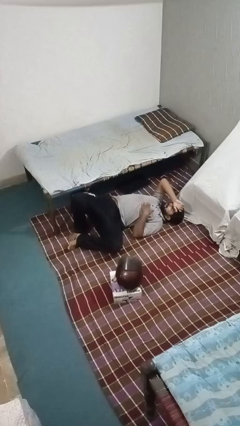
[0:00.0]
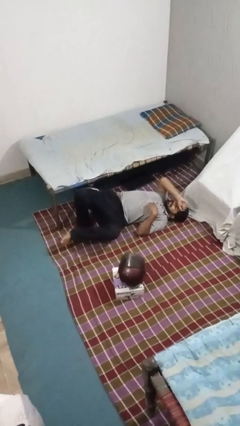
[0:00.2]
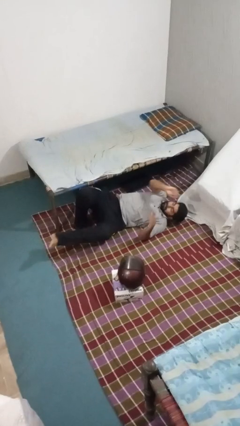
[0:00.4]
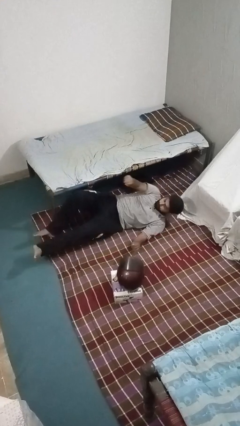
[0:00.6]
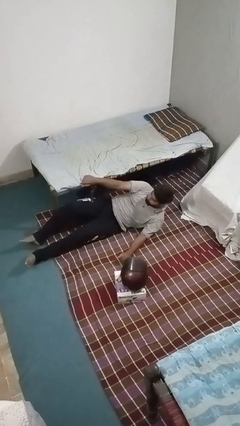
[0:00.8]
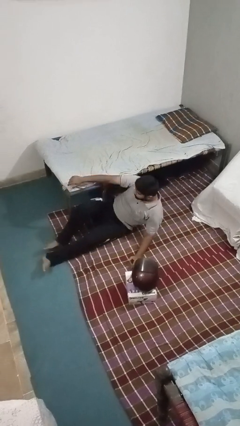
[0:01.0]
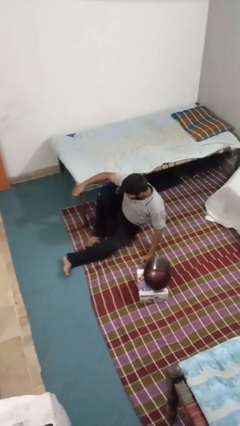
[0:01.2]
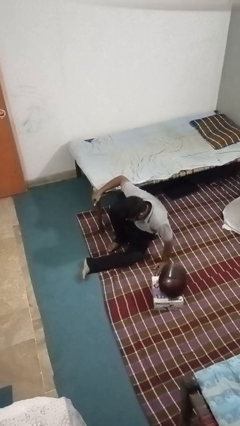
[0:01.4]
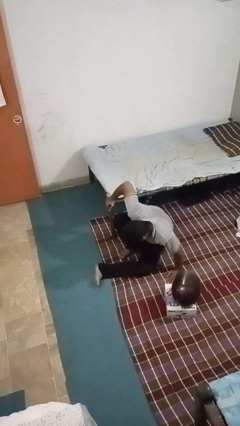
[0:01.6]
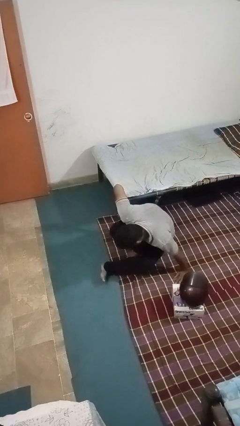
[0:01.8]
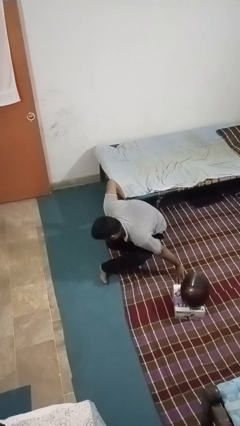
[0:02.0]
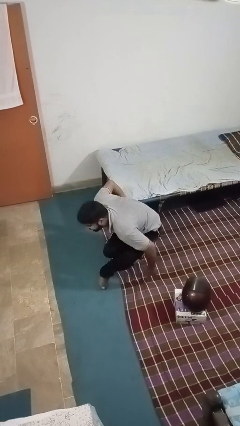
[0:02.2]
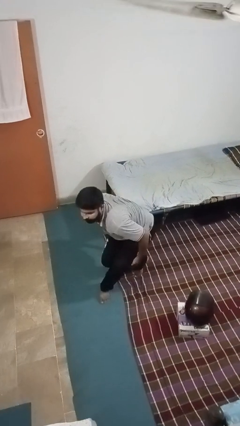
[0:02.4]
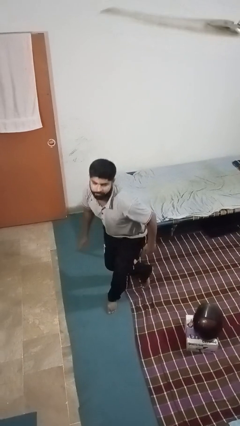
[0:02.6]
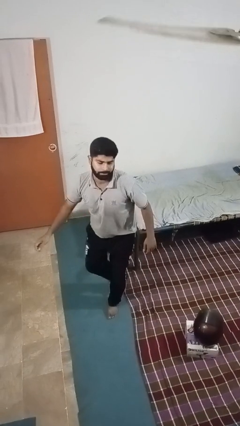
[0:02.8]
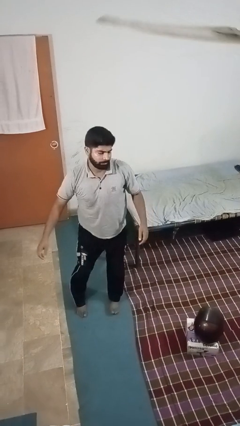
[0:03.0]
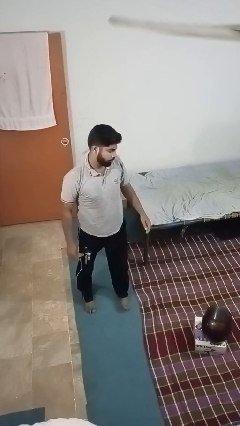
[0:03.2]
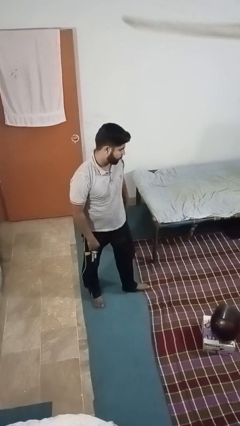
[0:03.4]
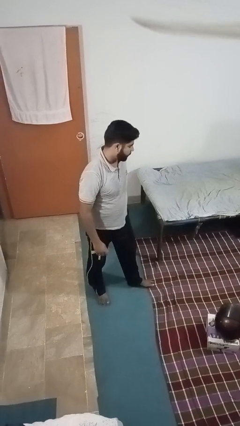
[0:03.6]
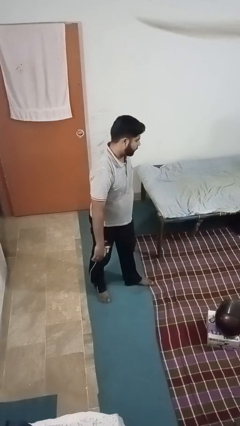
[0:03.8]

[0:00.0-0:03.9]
person stands up from floor

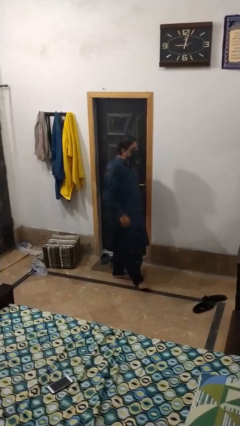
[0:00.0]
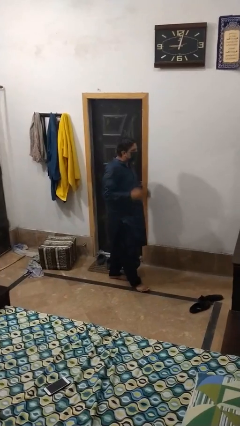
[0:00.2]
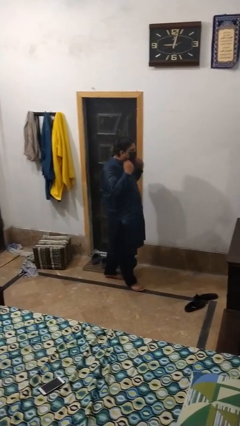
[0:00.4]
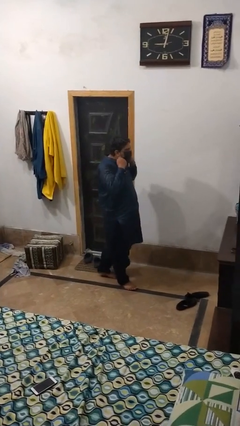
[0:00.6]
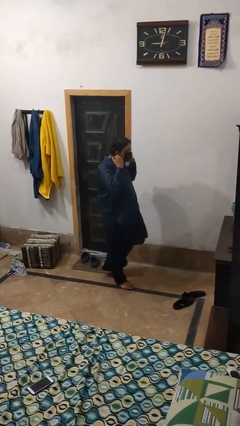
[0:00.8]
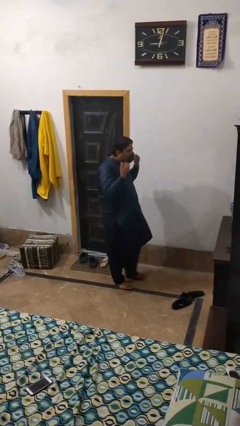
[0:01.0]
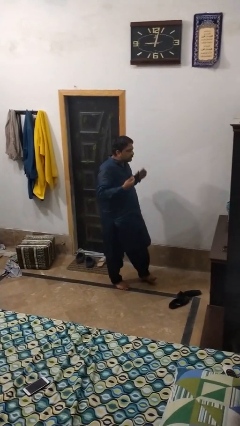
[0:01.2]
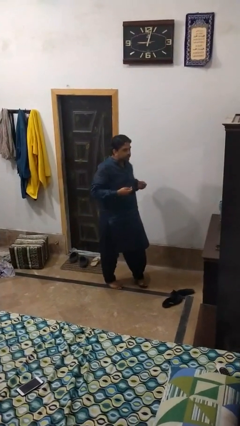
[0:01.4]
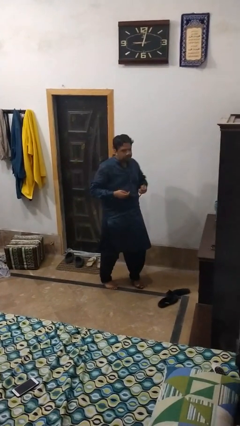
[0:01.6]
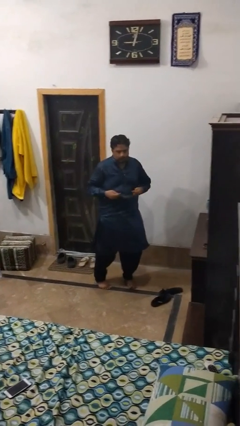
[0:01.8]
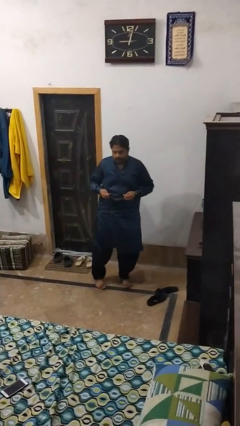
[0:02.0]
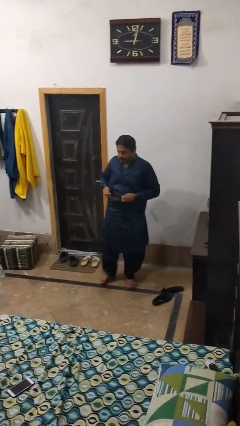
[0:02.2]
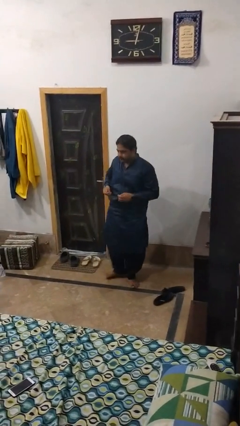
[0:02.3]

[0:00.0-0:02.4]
person takes off facemask

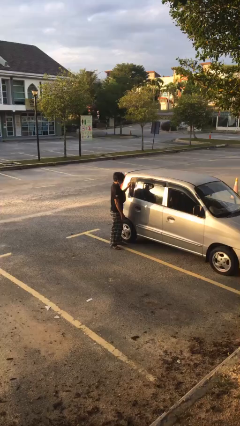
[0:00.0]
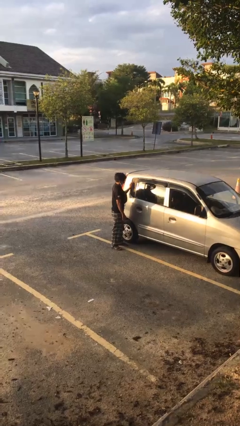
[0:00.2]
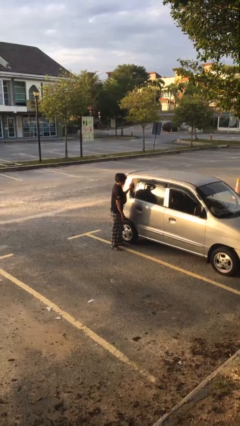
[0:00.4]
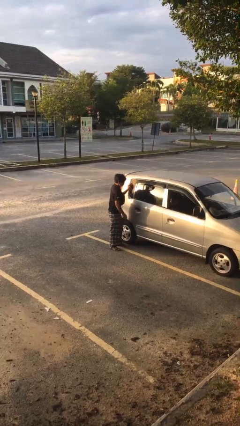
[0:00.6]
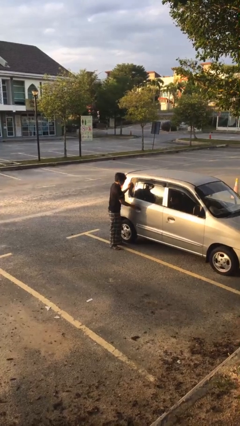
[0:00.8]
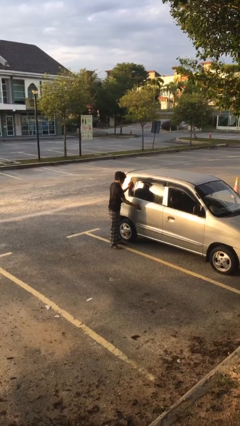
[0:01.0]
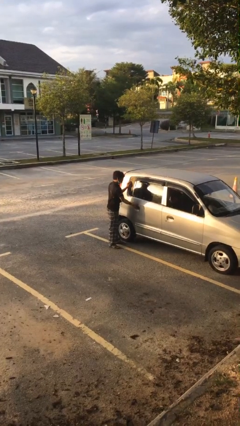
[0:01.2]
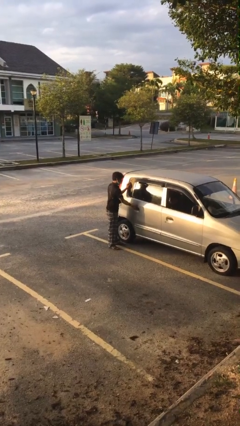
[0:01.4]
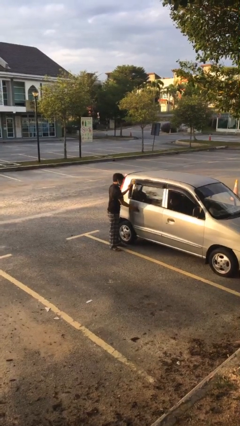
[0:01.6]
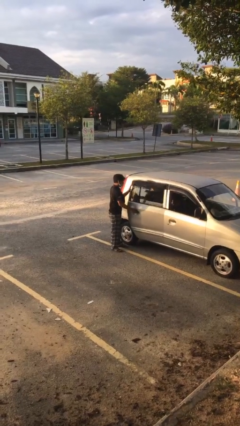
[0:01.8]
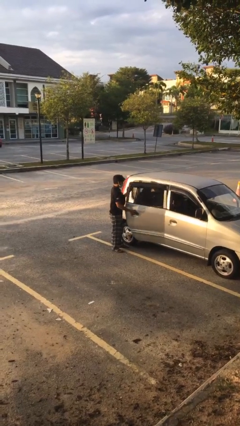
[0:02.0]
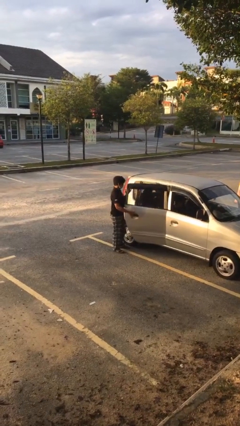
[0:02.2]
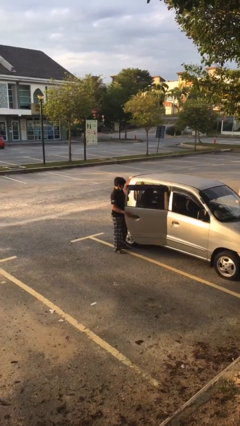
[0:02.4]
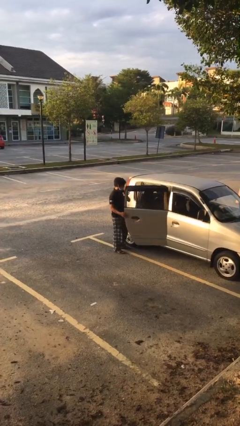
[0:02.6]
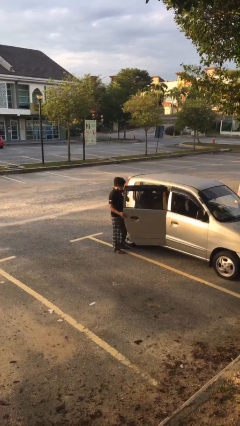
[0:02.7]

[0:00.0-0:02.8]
person opens car door

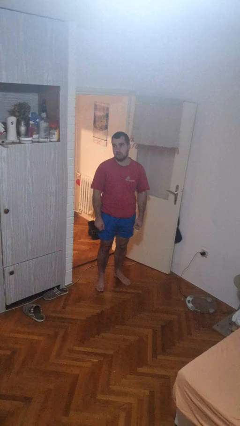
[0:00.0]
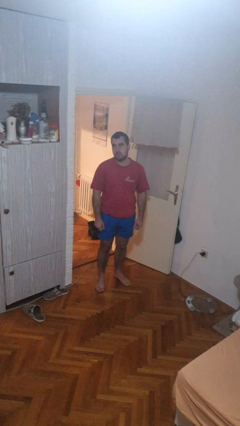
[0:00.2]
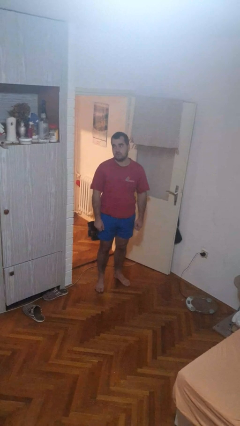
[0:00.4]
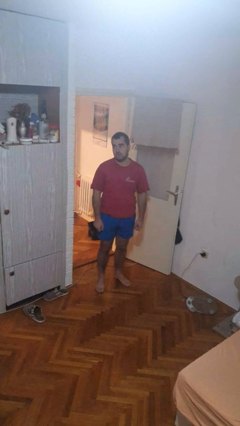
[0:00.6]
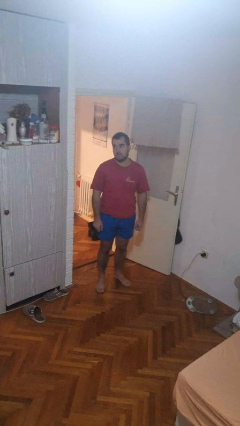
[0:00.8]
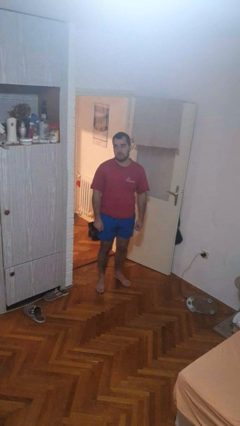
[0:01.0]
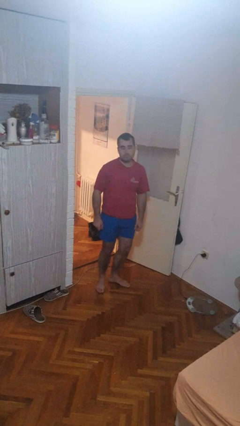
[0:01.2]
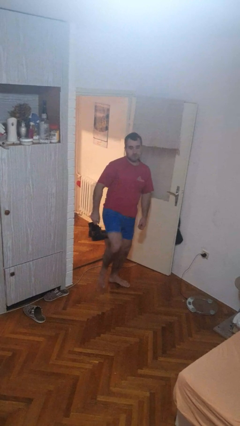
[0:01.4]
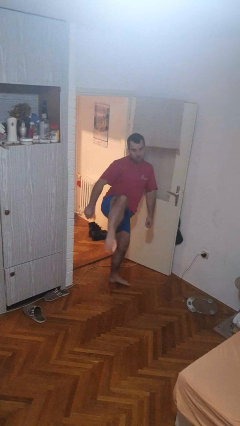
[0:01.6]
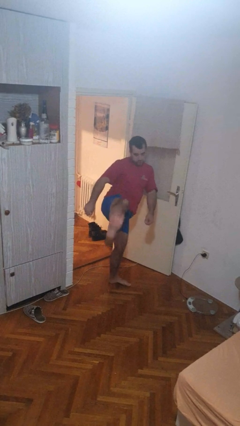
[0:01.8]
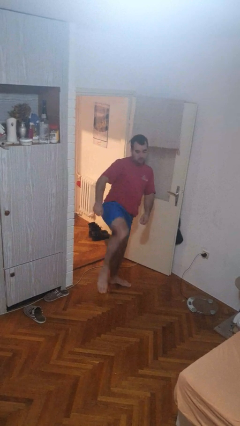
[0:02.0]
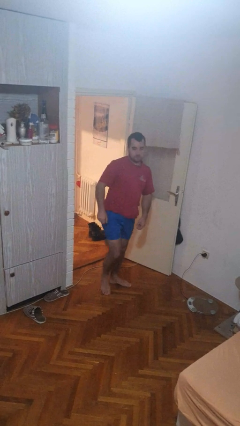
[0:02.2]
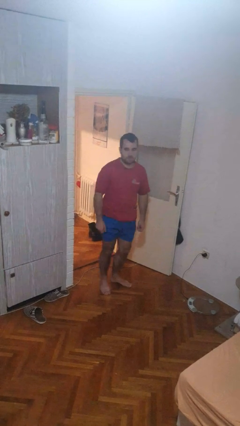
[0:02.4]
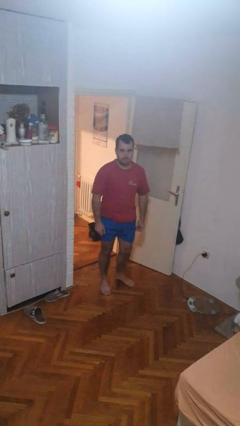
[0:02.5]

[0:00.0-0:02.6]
person karate kicks

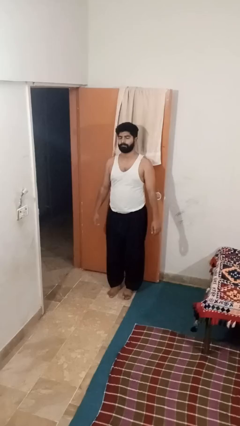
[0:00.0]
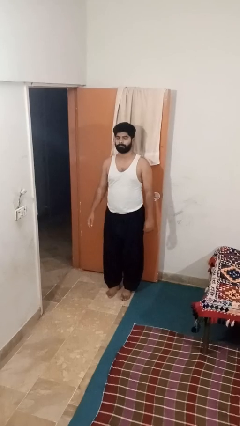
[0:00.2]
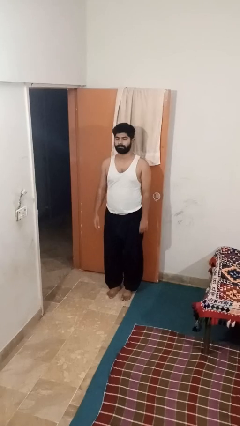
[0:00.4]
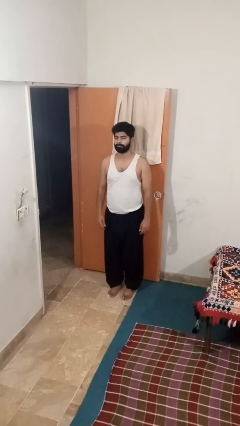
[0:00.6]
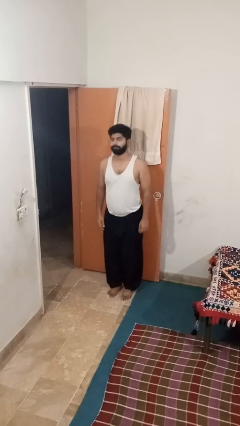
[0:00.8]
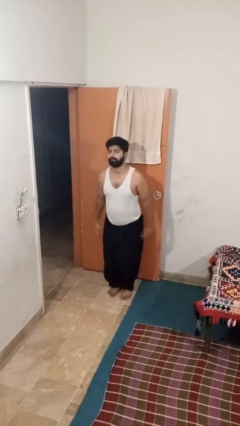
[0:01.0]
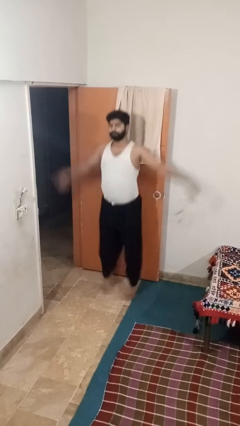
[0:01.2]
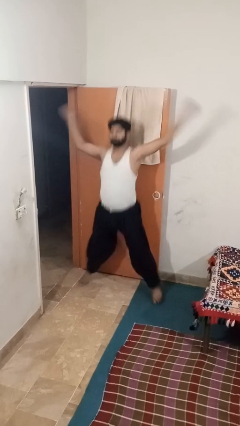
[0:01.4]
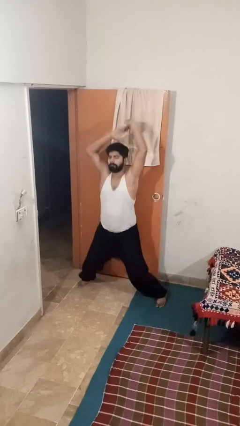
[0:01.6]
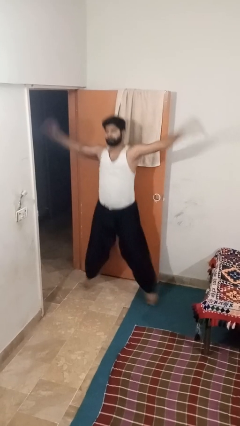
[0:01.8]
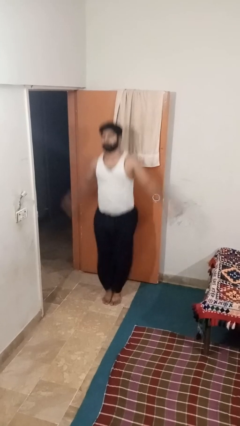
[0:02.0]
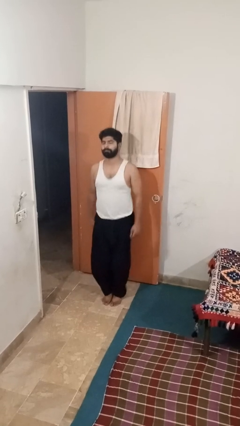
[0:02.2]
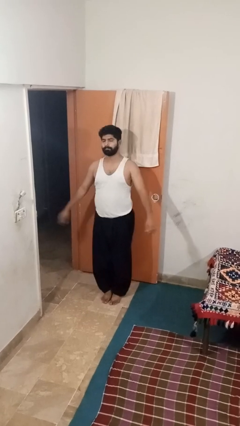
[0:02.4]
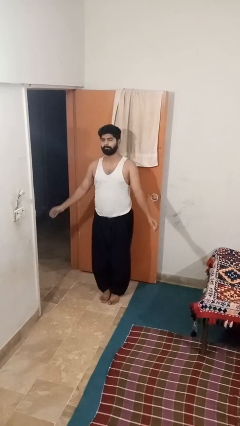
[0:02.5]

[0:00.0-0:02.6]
person exercises with jumping jacks

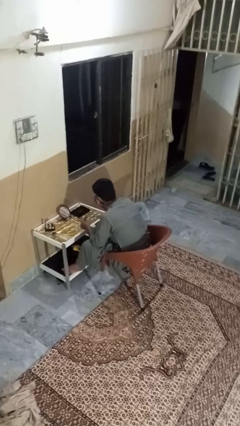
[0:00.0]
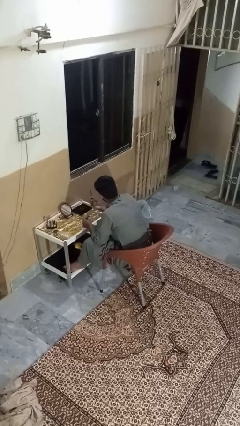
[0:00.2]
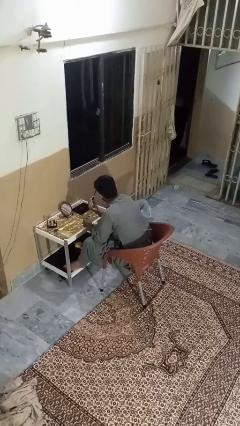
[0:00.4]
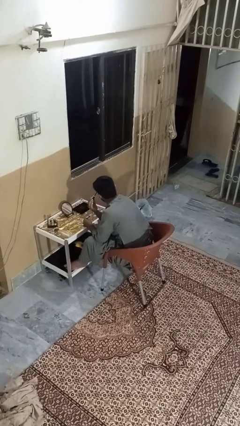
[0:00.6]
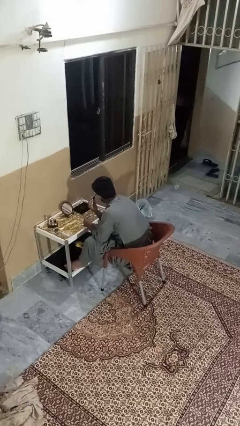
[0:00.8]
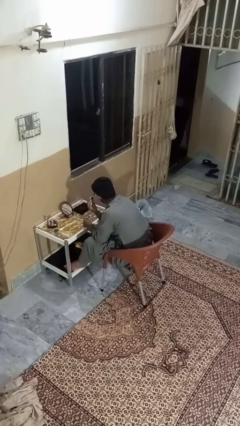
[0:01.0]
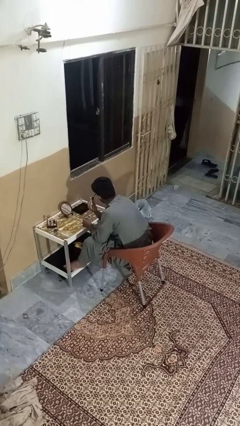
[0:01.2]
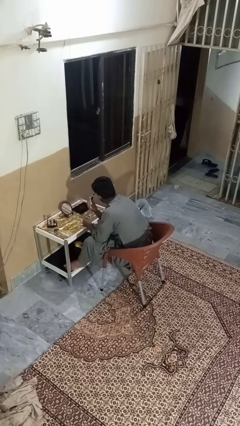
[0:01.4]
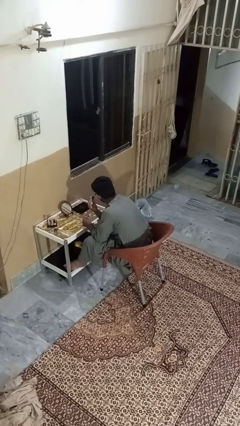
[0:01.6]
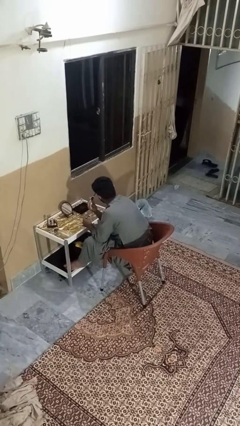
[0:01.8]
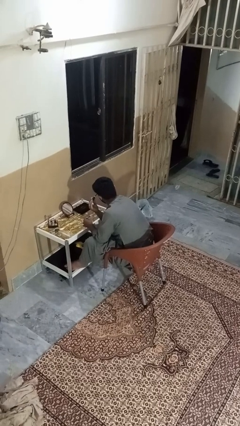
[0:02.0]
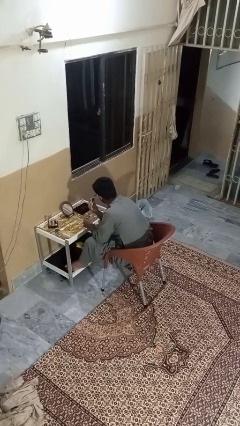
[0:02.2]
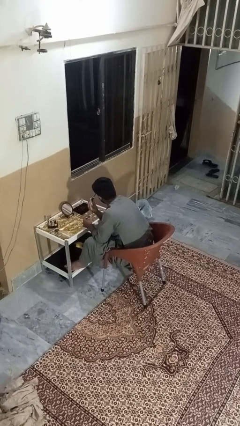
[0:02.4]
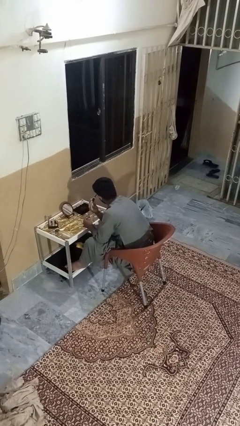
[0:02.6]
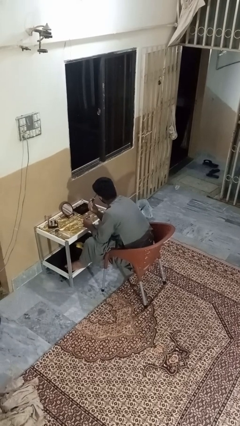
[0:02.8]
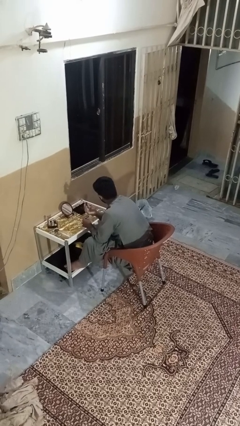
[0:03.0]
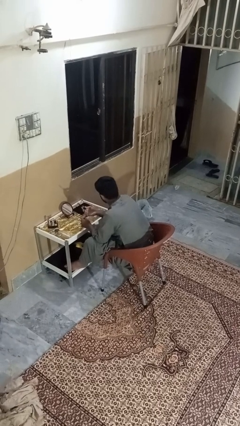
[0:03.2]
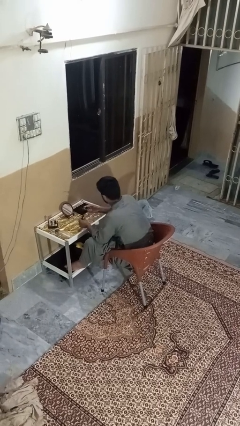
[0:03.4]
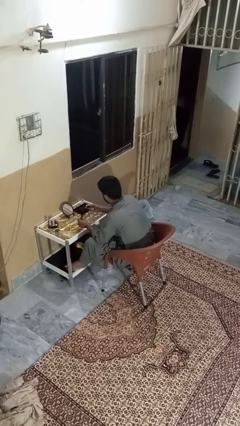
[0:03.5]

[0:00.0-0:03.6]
person applies eye makeup
